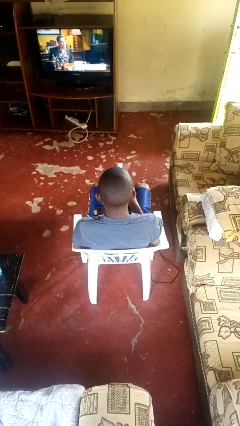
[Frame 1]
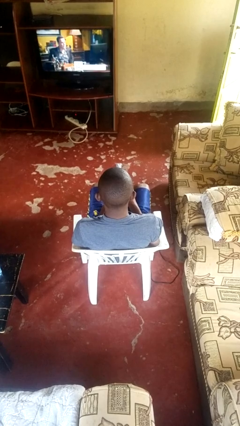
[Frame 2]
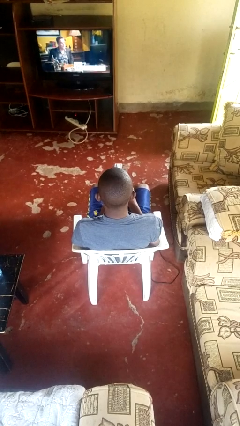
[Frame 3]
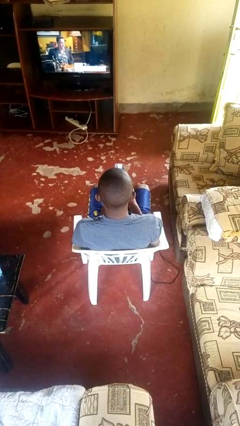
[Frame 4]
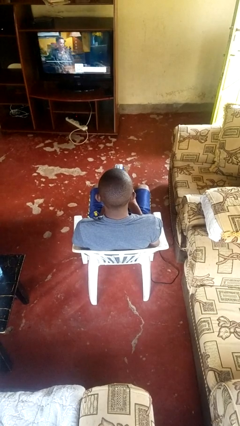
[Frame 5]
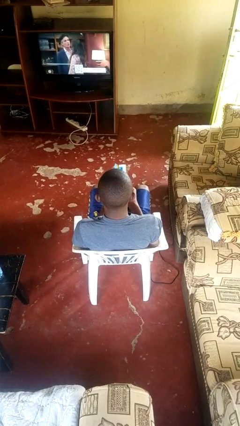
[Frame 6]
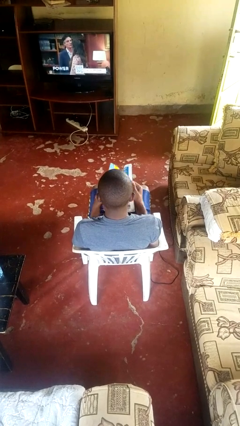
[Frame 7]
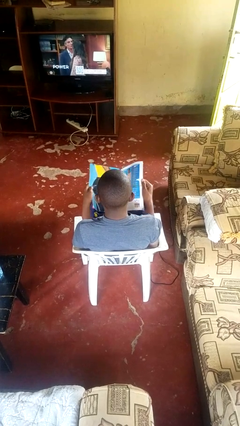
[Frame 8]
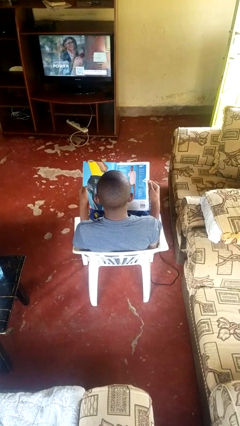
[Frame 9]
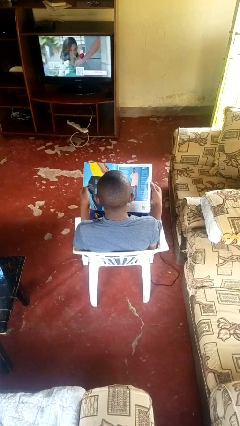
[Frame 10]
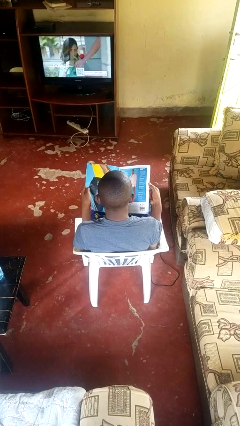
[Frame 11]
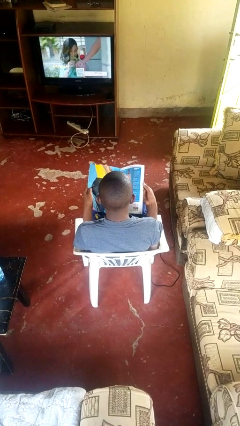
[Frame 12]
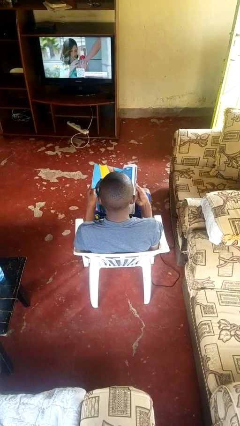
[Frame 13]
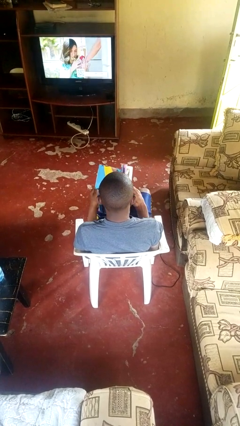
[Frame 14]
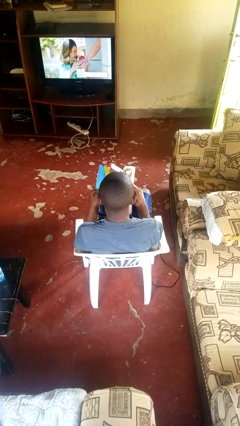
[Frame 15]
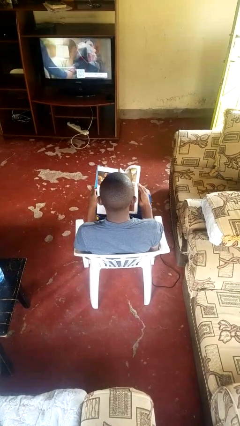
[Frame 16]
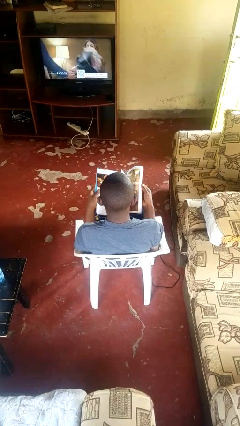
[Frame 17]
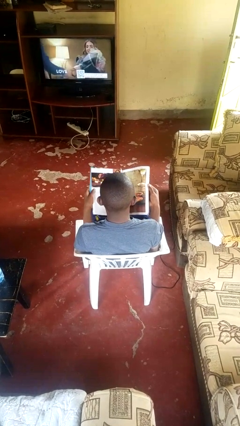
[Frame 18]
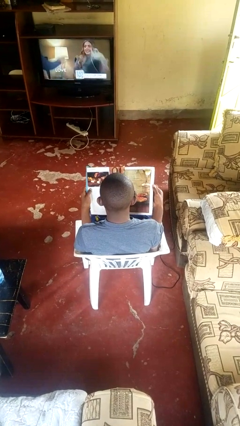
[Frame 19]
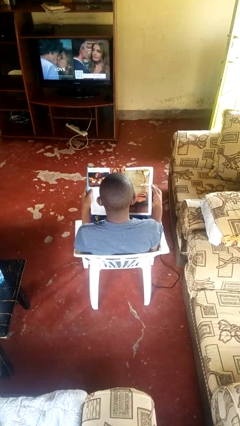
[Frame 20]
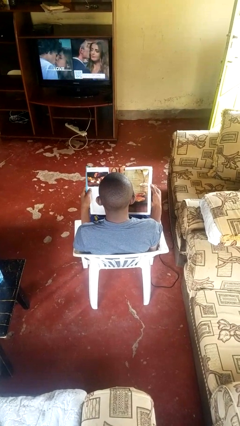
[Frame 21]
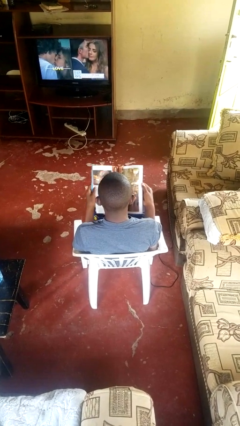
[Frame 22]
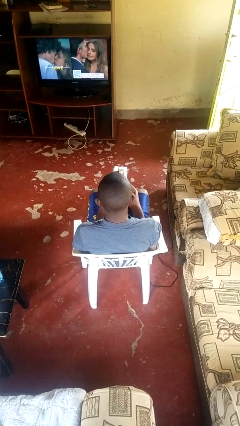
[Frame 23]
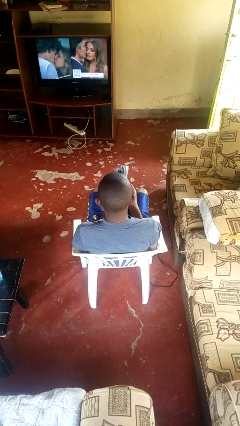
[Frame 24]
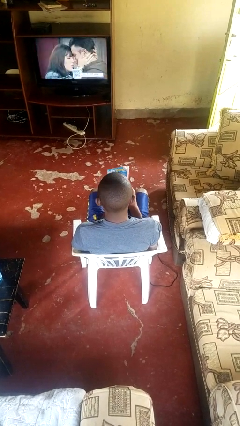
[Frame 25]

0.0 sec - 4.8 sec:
person reads magazine

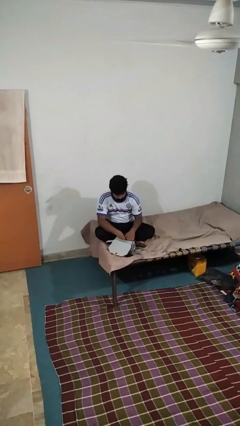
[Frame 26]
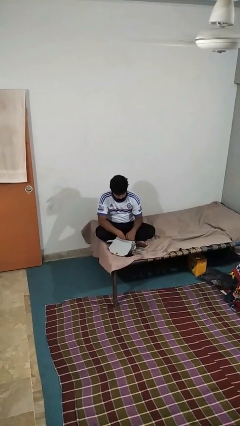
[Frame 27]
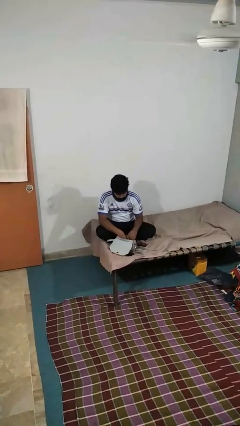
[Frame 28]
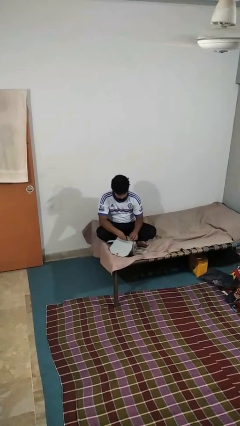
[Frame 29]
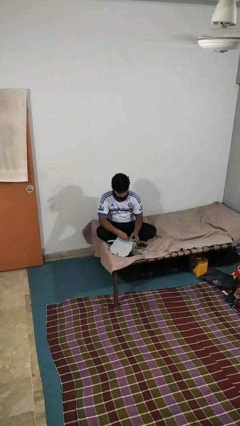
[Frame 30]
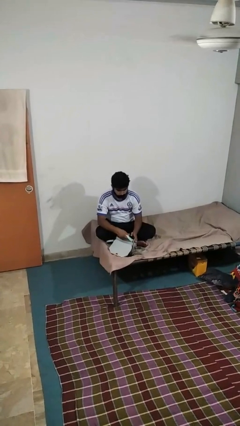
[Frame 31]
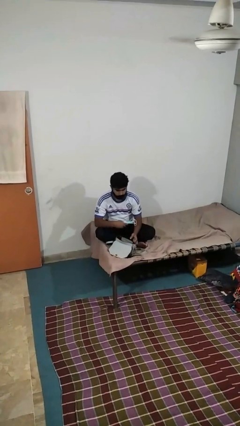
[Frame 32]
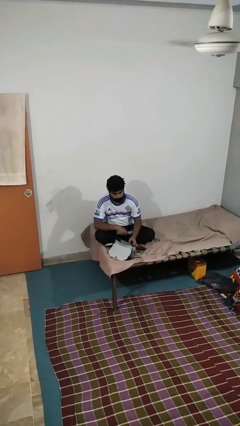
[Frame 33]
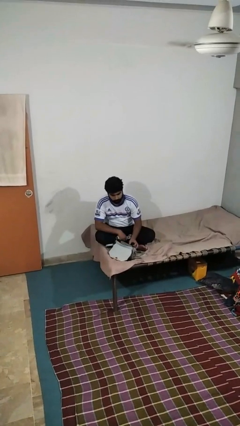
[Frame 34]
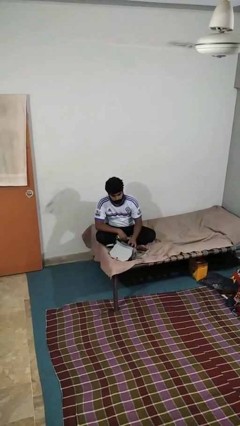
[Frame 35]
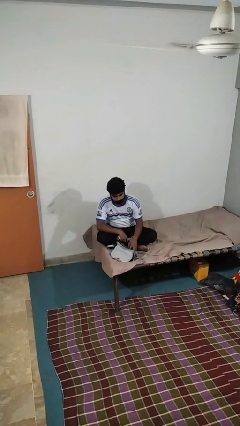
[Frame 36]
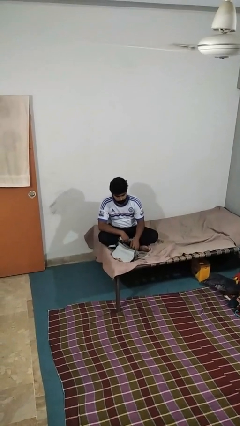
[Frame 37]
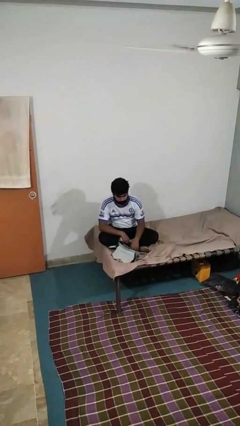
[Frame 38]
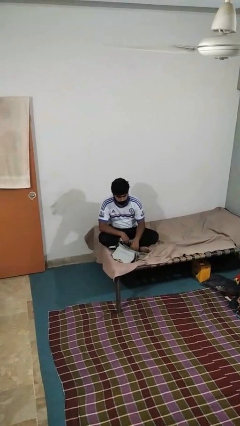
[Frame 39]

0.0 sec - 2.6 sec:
person takes object from purse

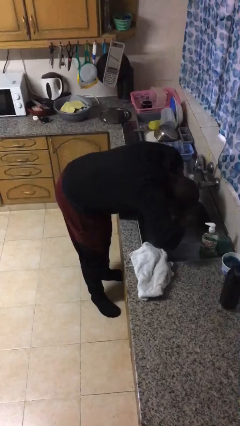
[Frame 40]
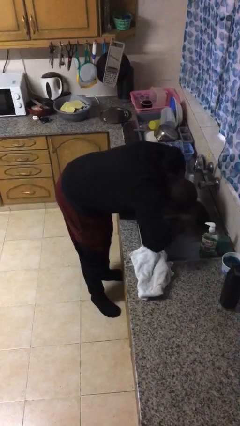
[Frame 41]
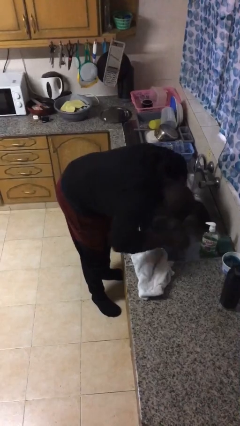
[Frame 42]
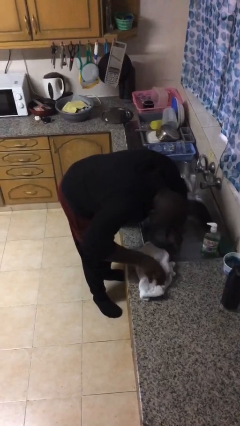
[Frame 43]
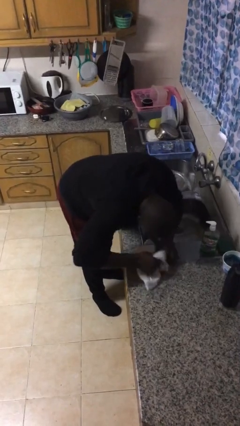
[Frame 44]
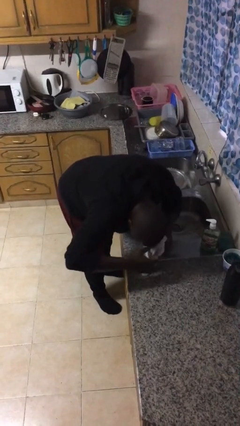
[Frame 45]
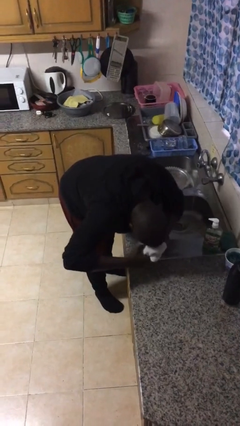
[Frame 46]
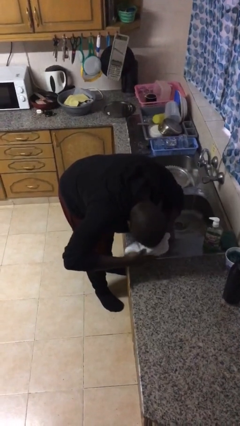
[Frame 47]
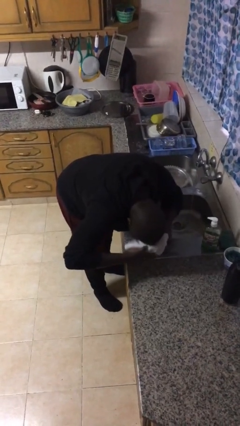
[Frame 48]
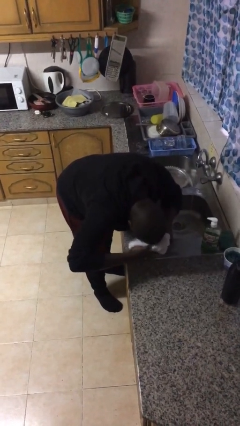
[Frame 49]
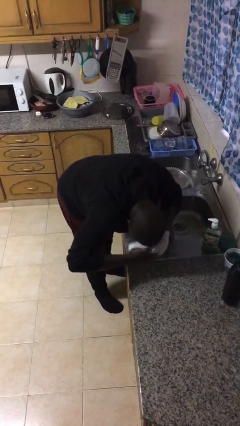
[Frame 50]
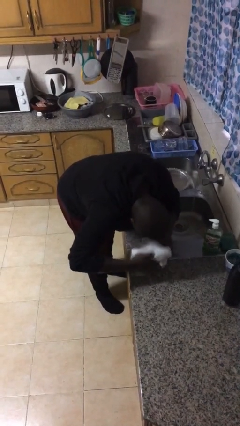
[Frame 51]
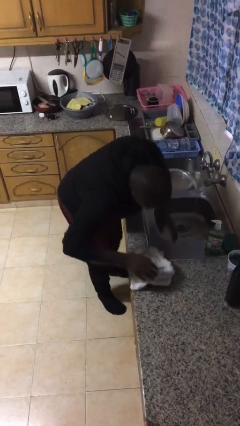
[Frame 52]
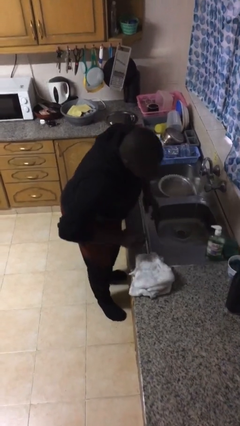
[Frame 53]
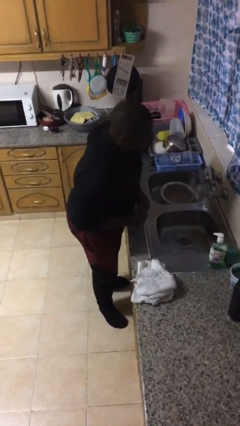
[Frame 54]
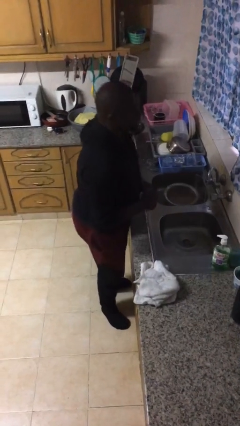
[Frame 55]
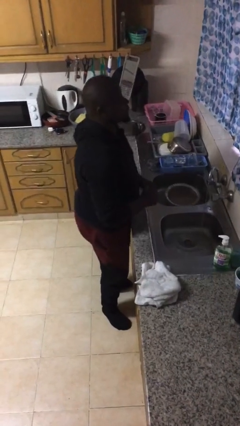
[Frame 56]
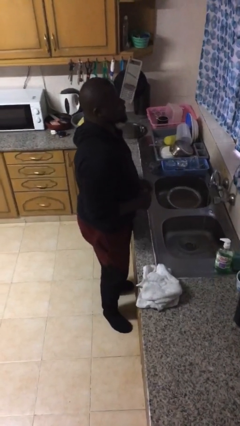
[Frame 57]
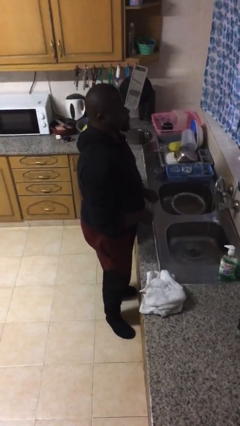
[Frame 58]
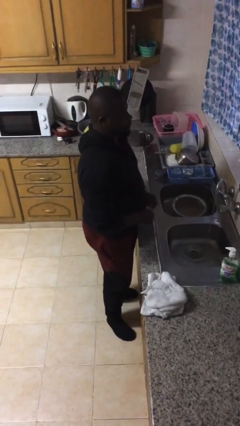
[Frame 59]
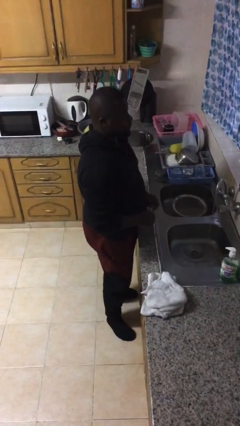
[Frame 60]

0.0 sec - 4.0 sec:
person dries face with towel

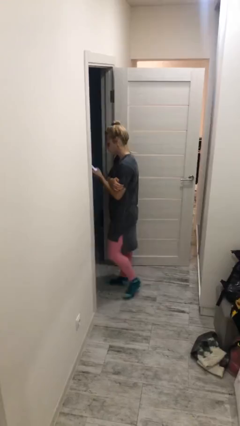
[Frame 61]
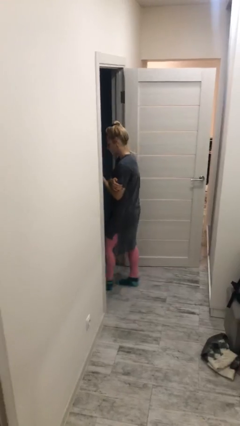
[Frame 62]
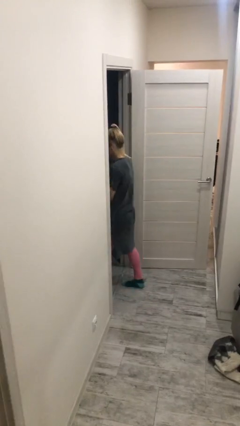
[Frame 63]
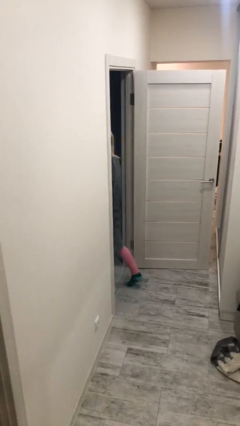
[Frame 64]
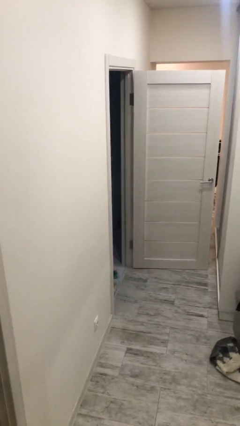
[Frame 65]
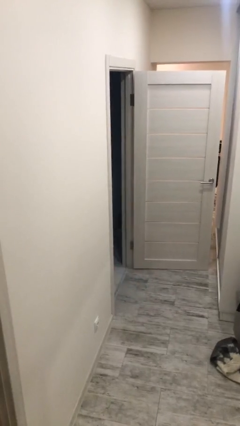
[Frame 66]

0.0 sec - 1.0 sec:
person exits scene through structure

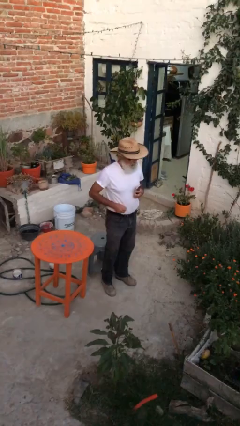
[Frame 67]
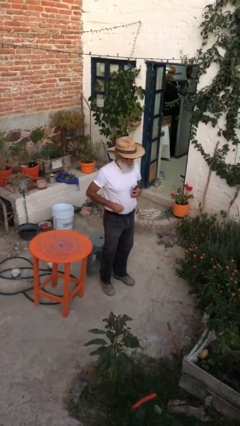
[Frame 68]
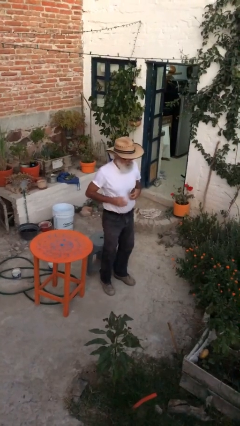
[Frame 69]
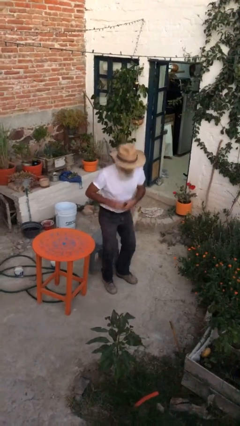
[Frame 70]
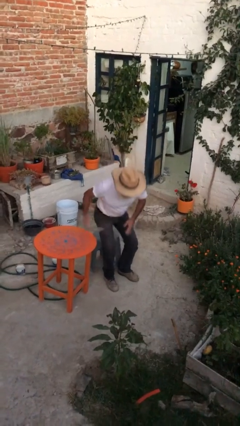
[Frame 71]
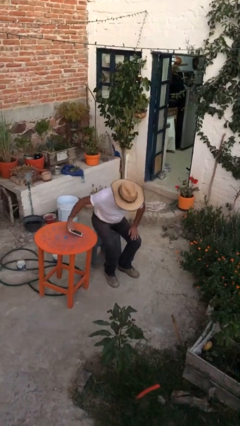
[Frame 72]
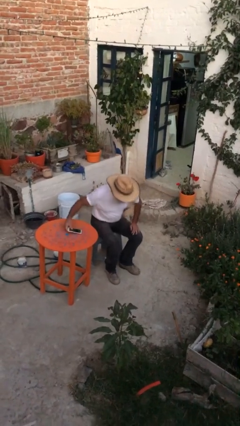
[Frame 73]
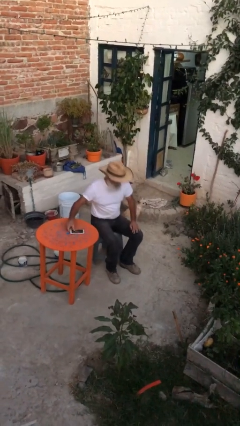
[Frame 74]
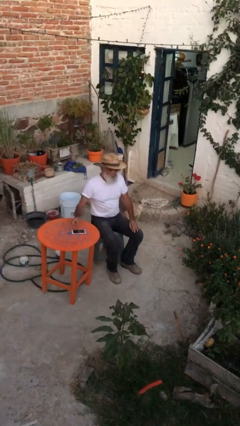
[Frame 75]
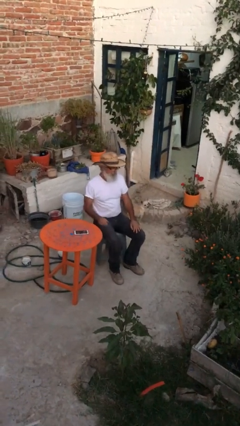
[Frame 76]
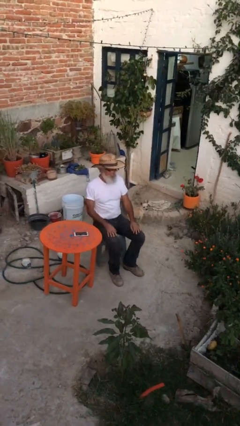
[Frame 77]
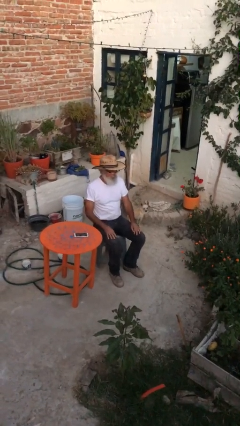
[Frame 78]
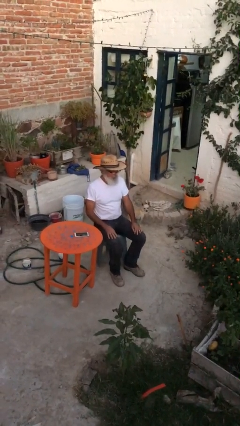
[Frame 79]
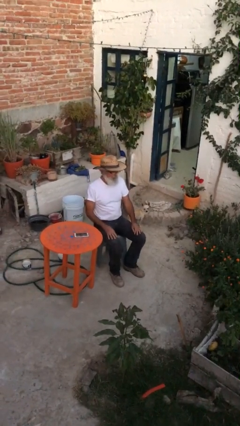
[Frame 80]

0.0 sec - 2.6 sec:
person sits down

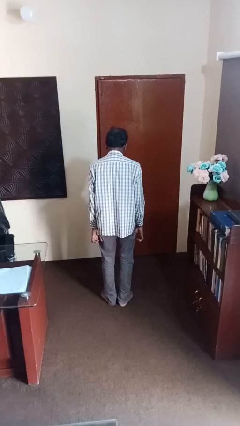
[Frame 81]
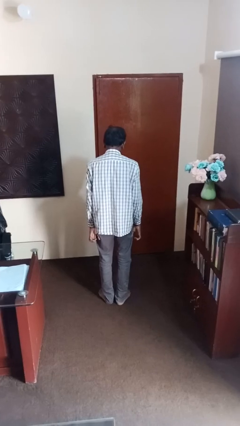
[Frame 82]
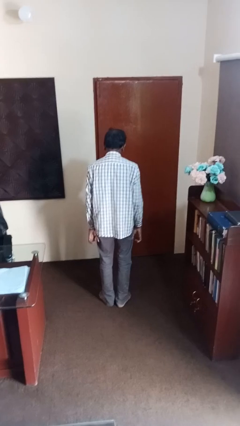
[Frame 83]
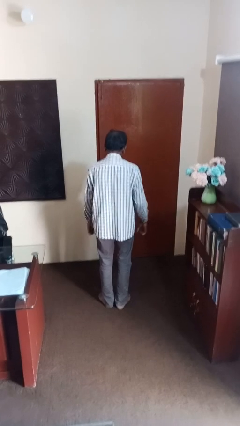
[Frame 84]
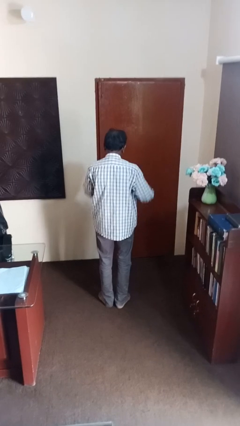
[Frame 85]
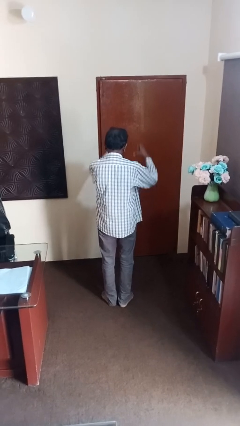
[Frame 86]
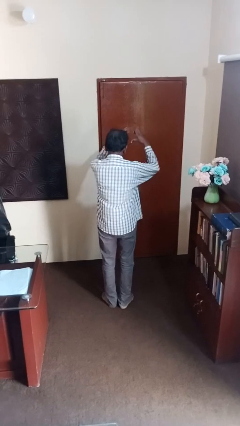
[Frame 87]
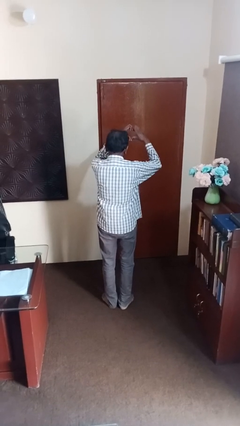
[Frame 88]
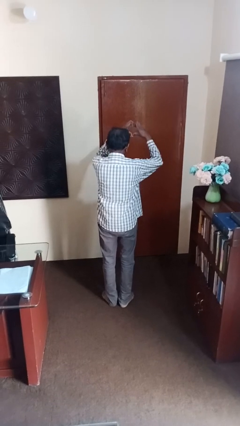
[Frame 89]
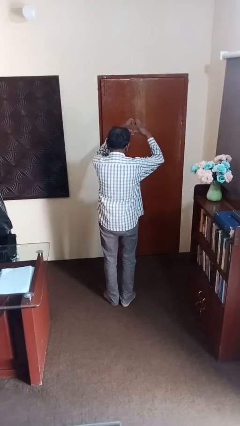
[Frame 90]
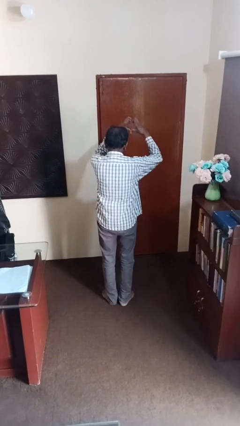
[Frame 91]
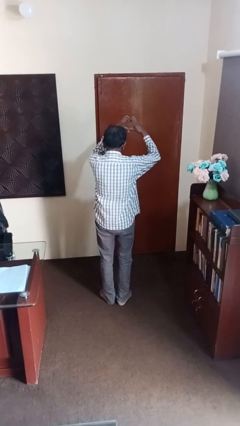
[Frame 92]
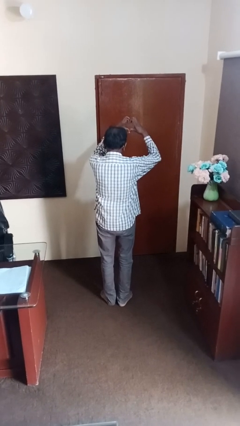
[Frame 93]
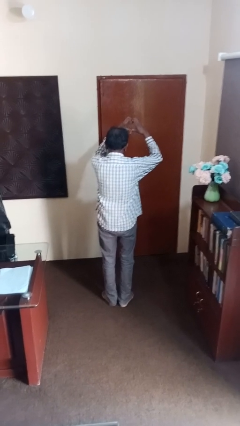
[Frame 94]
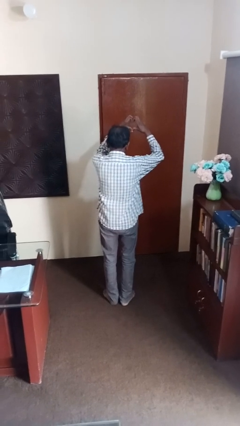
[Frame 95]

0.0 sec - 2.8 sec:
person gestures heart
